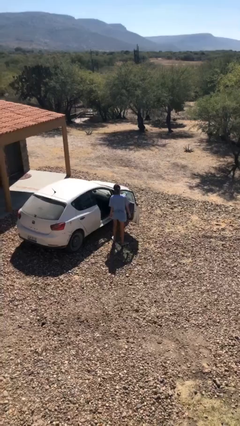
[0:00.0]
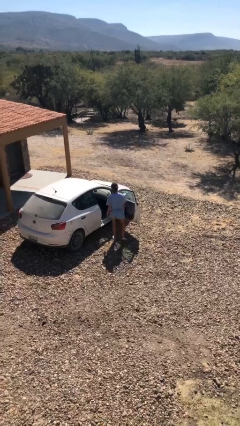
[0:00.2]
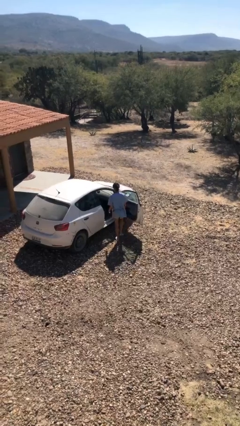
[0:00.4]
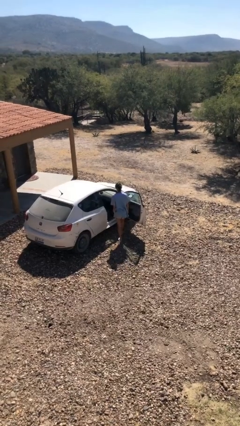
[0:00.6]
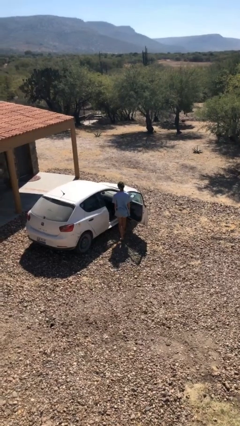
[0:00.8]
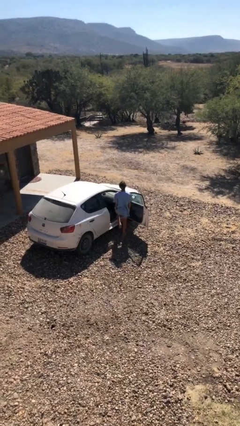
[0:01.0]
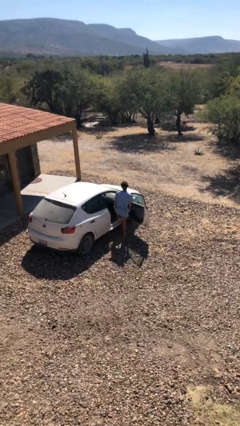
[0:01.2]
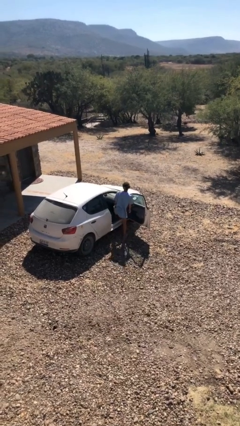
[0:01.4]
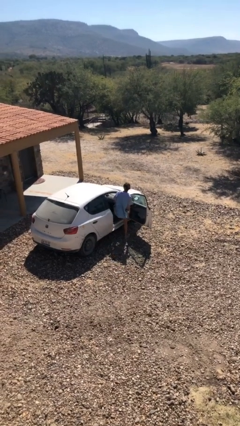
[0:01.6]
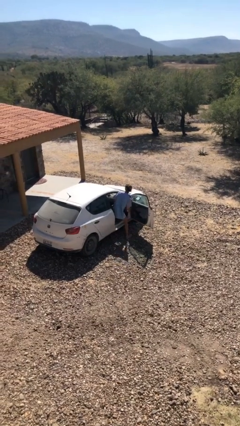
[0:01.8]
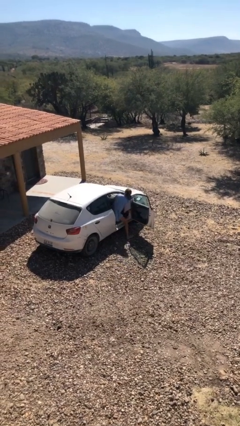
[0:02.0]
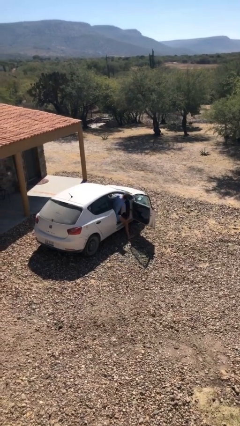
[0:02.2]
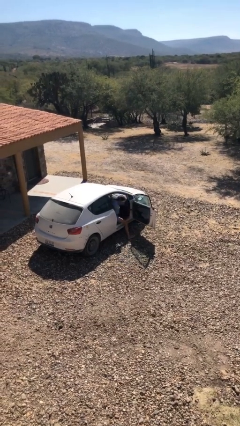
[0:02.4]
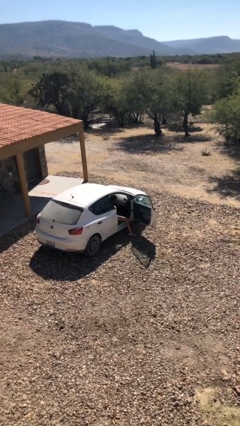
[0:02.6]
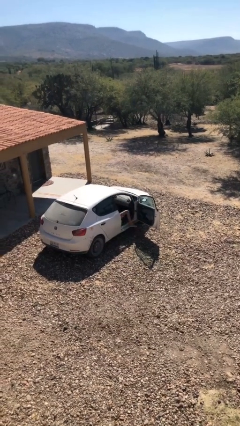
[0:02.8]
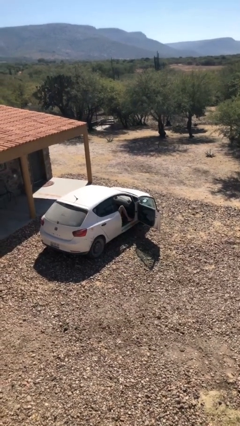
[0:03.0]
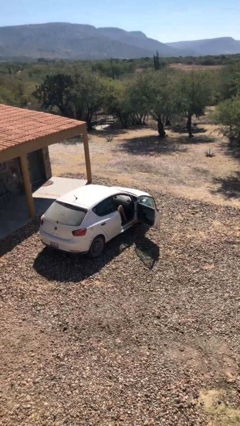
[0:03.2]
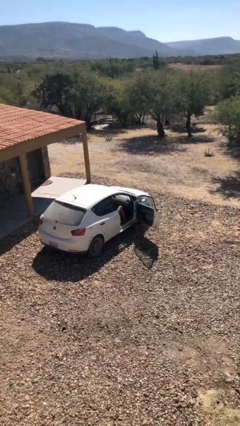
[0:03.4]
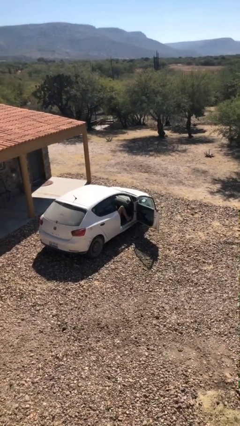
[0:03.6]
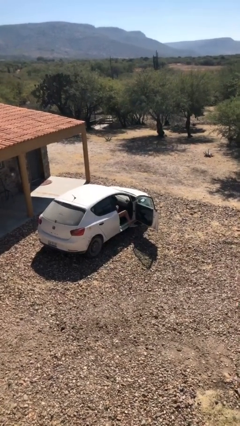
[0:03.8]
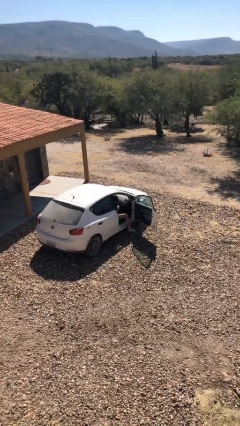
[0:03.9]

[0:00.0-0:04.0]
person enters car

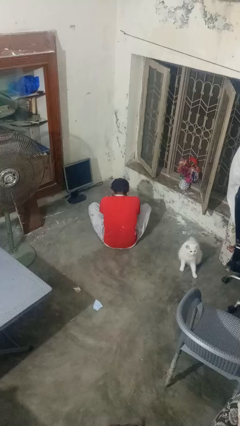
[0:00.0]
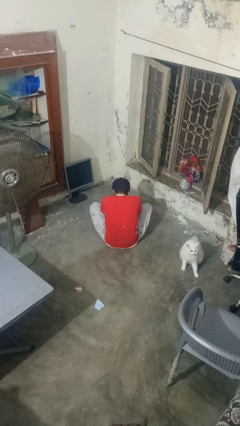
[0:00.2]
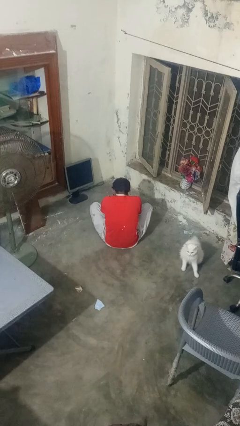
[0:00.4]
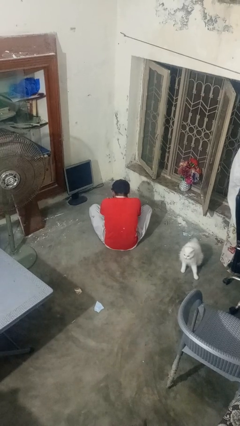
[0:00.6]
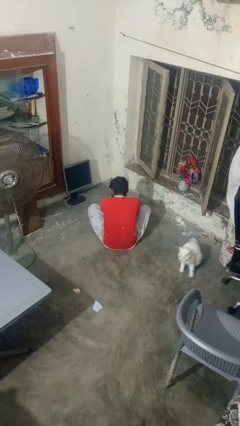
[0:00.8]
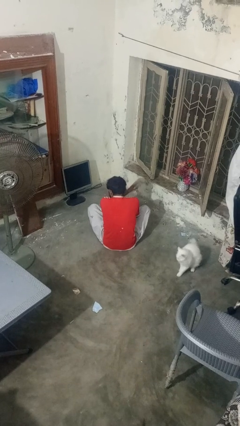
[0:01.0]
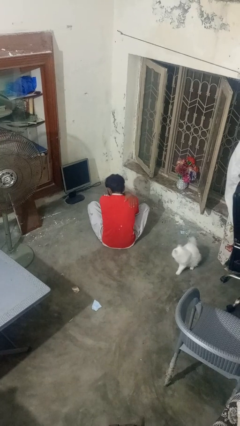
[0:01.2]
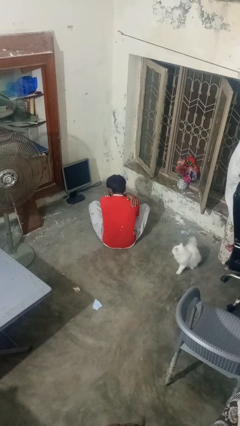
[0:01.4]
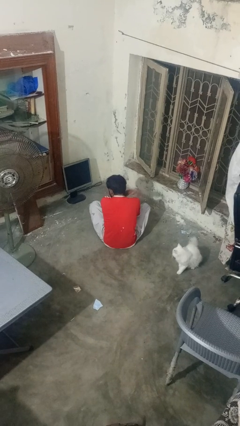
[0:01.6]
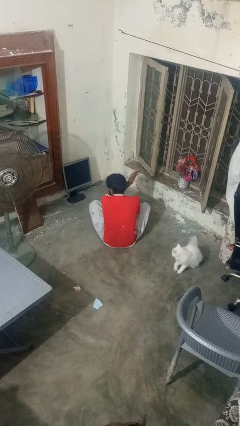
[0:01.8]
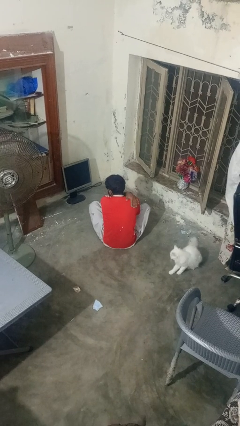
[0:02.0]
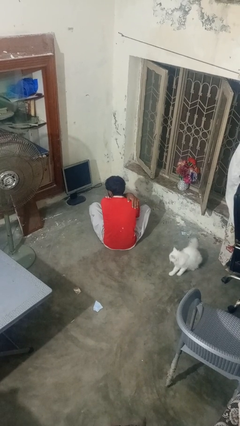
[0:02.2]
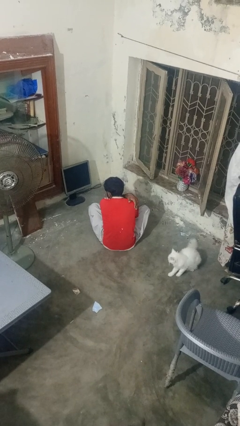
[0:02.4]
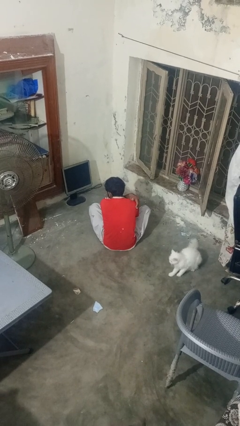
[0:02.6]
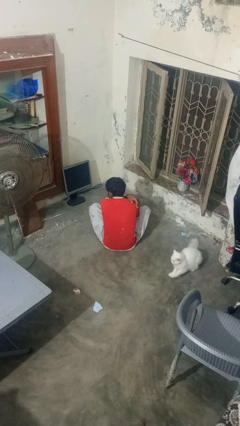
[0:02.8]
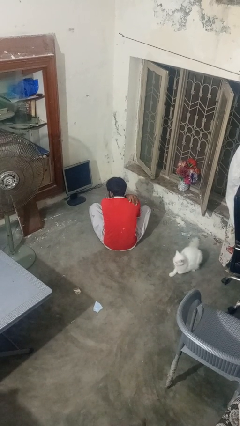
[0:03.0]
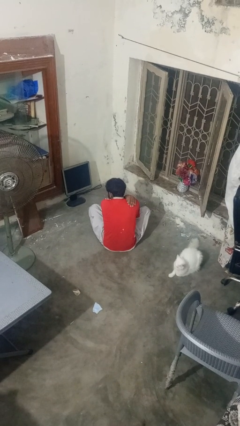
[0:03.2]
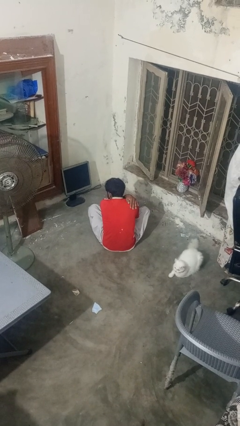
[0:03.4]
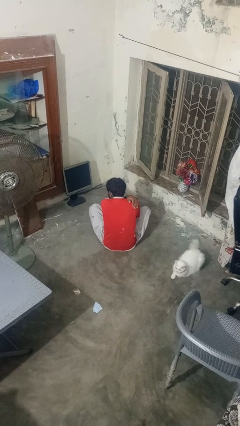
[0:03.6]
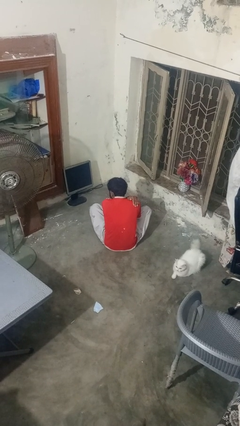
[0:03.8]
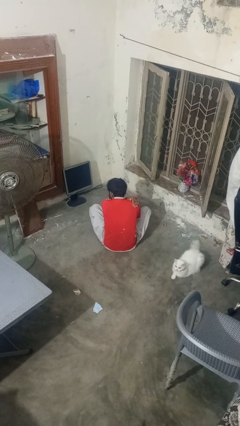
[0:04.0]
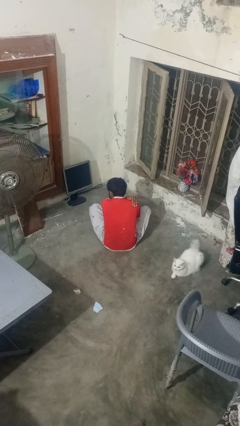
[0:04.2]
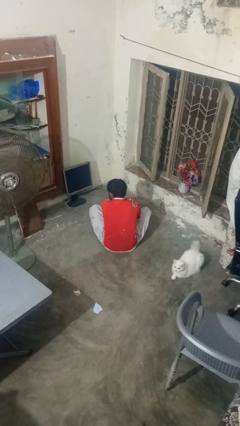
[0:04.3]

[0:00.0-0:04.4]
person swats bug

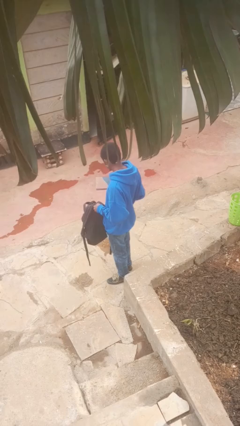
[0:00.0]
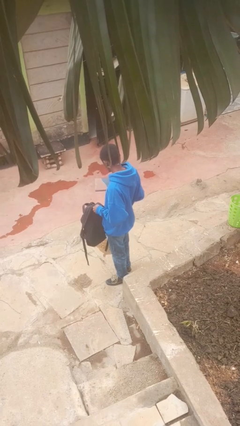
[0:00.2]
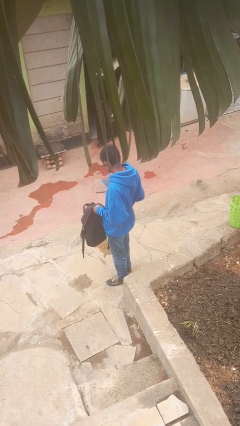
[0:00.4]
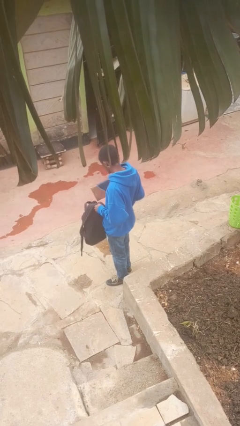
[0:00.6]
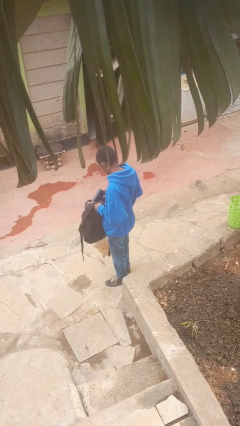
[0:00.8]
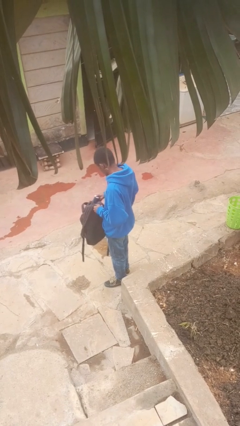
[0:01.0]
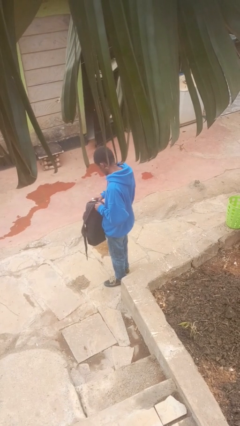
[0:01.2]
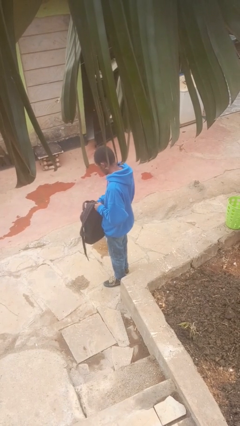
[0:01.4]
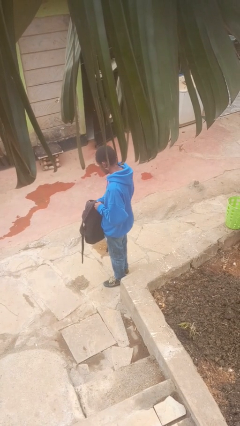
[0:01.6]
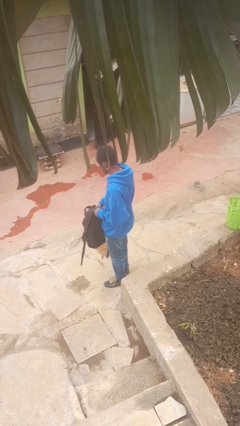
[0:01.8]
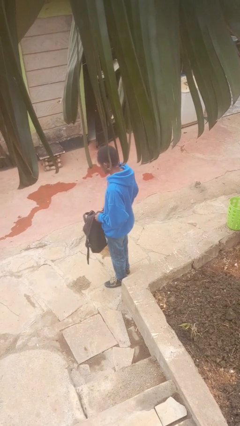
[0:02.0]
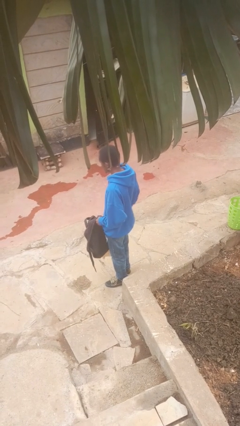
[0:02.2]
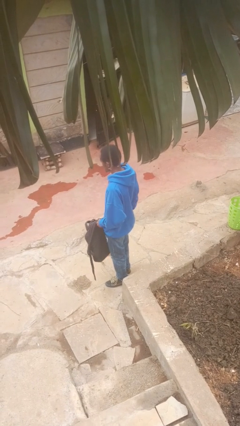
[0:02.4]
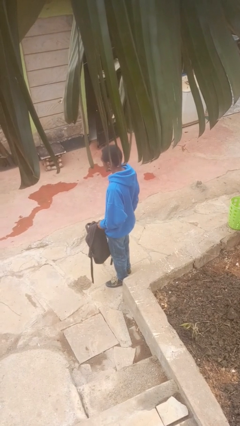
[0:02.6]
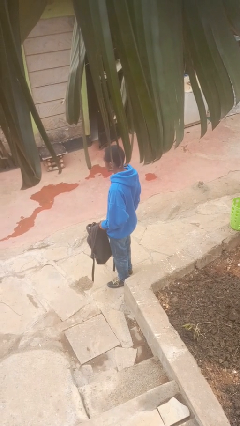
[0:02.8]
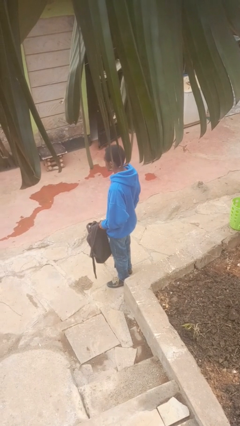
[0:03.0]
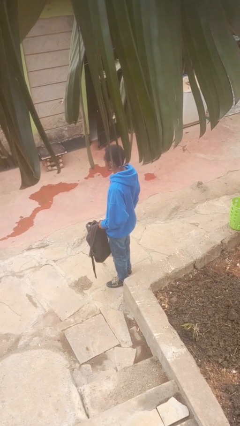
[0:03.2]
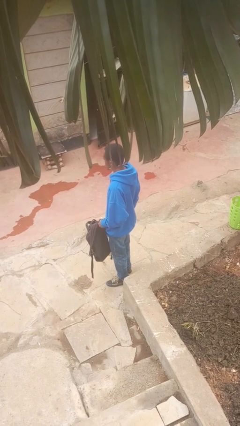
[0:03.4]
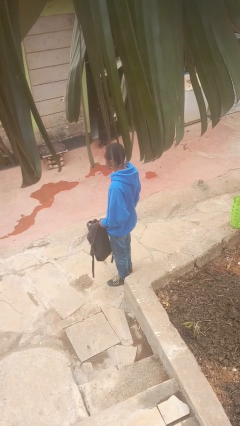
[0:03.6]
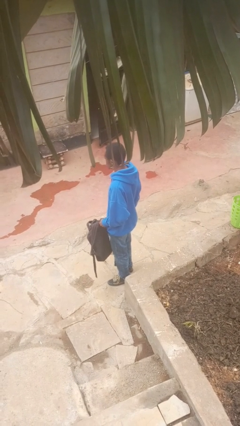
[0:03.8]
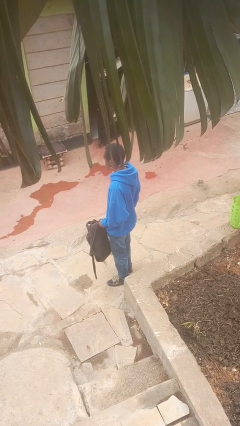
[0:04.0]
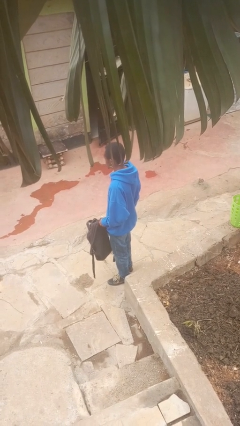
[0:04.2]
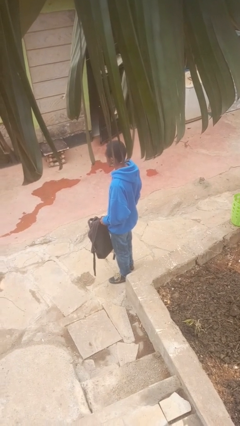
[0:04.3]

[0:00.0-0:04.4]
person puts object into backpack

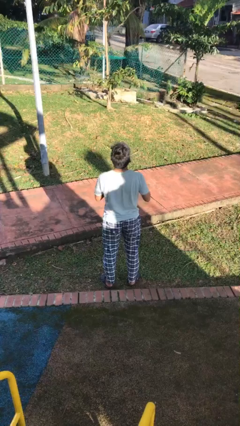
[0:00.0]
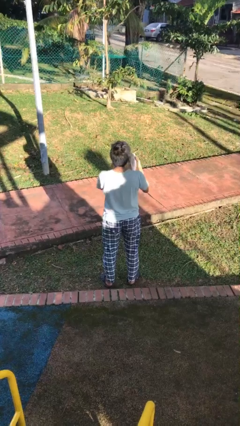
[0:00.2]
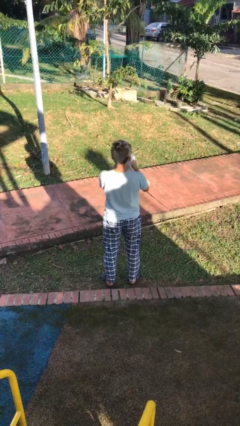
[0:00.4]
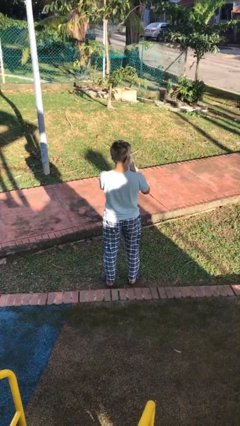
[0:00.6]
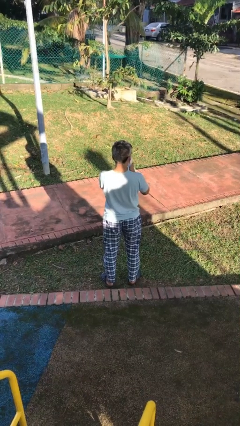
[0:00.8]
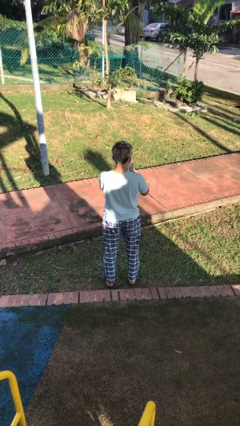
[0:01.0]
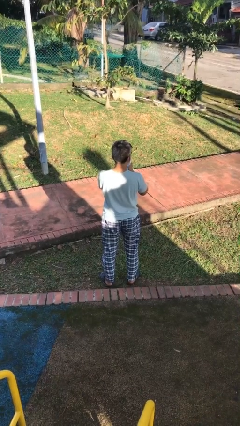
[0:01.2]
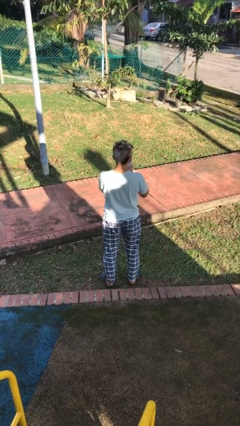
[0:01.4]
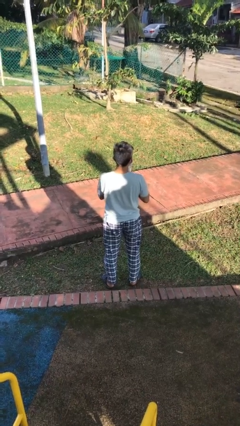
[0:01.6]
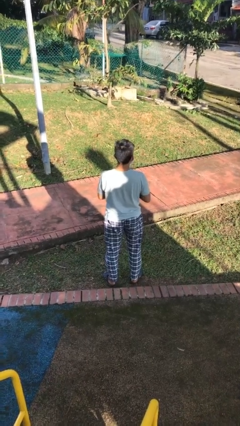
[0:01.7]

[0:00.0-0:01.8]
person blows nose

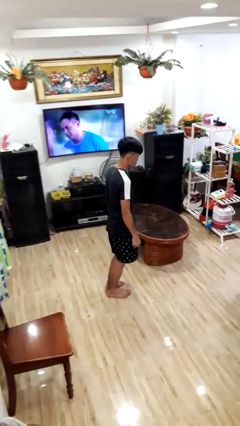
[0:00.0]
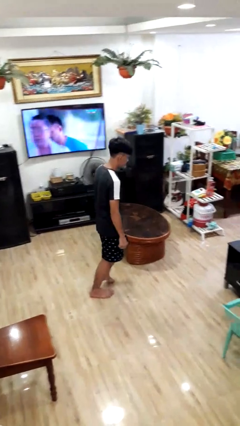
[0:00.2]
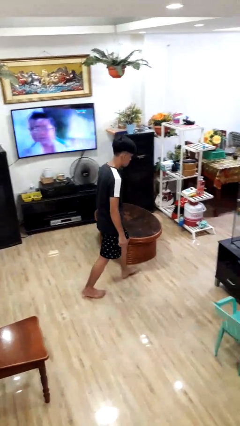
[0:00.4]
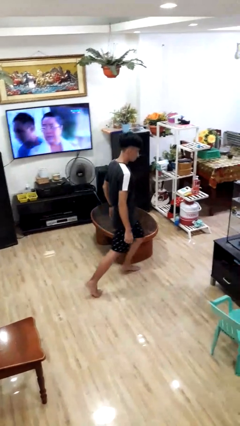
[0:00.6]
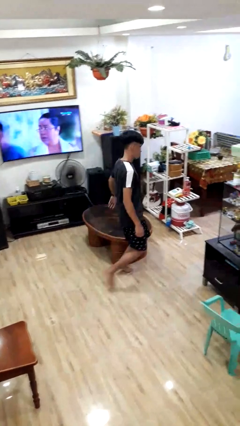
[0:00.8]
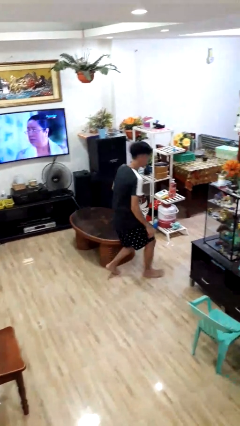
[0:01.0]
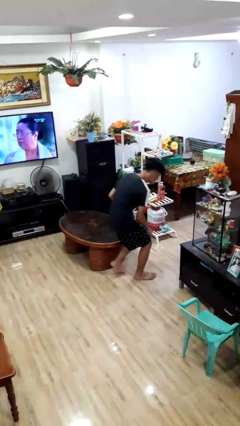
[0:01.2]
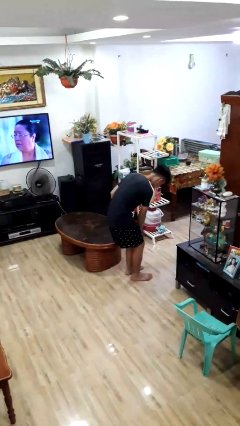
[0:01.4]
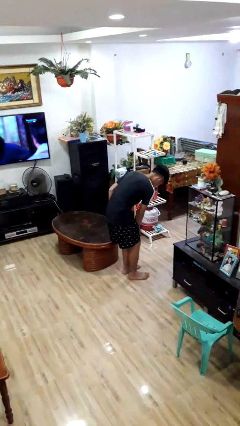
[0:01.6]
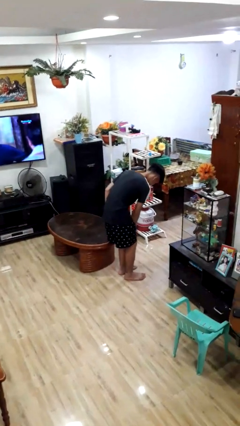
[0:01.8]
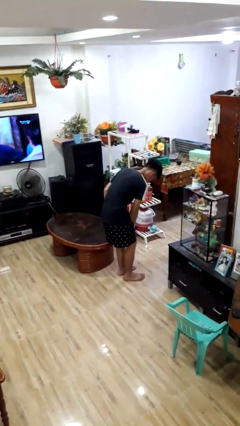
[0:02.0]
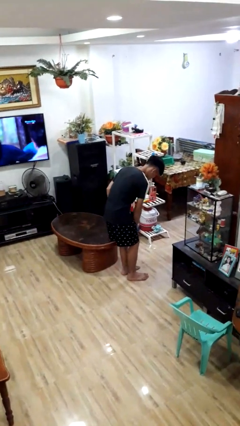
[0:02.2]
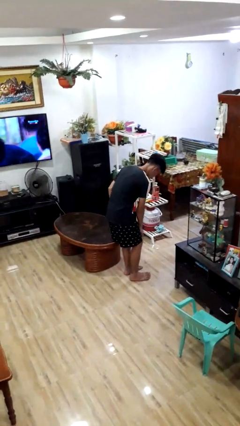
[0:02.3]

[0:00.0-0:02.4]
person bumps into table

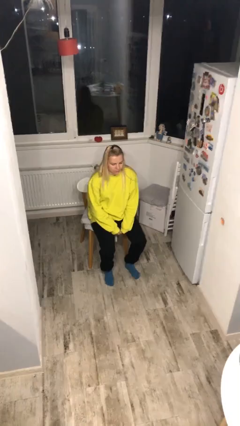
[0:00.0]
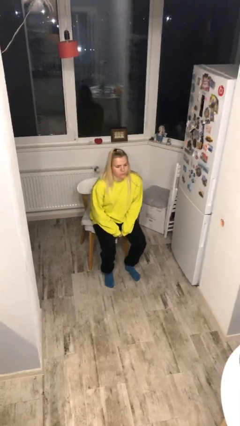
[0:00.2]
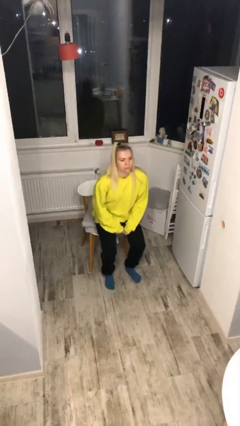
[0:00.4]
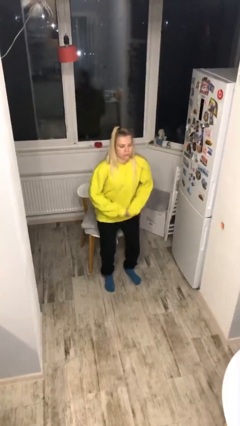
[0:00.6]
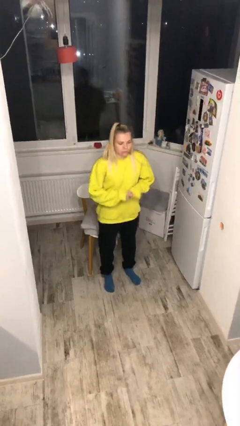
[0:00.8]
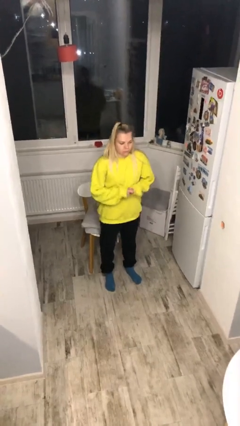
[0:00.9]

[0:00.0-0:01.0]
person stands up
